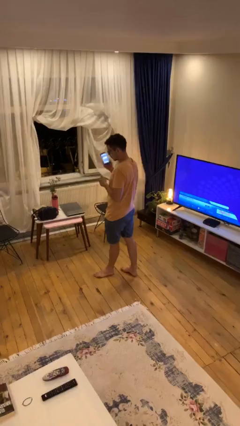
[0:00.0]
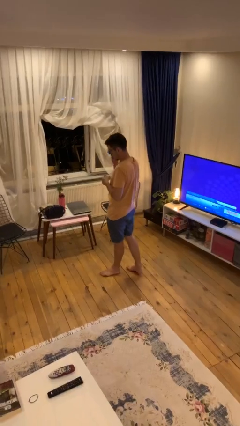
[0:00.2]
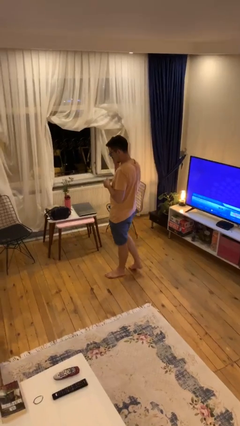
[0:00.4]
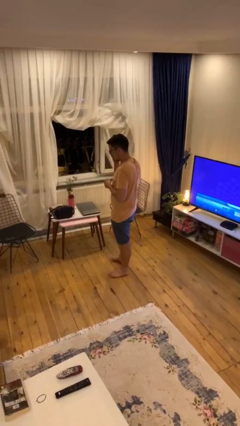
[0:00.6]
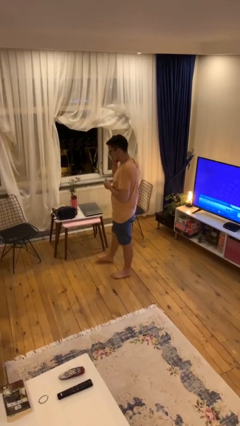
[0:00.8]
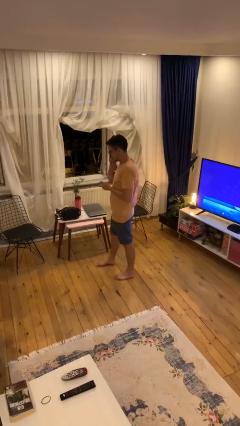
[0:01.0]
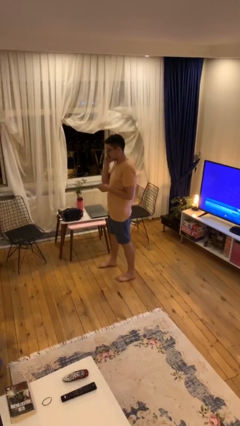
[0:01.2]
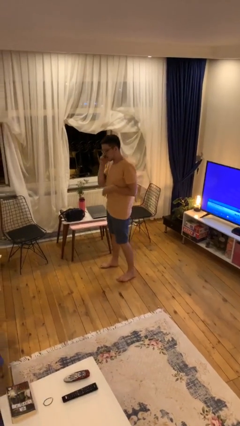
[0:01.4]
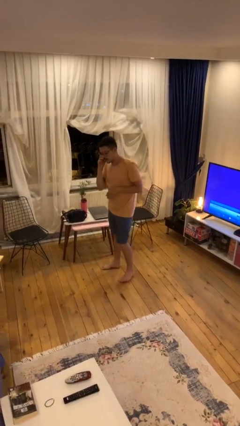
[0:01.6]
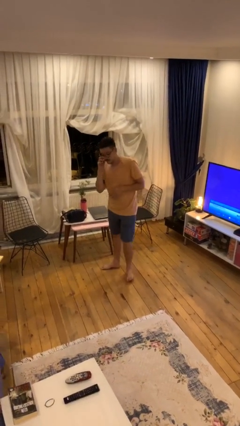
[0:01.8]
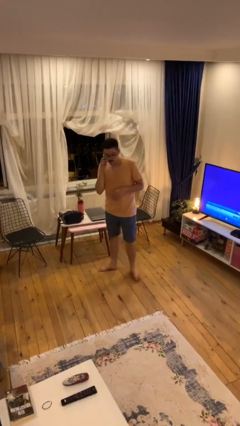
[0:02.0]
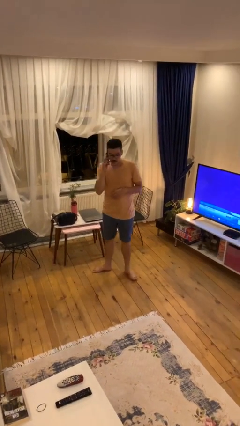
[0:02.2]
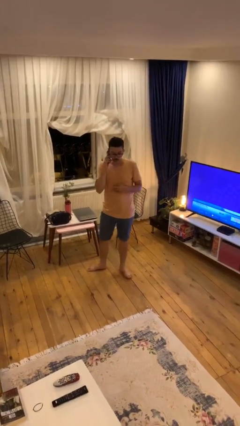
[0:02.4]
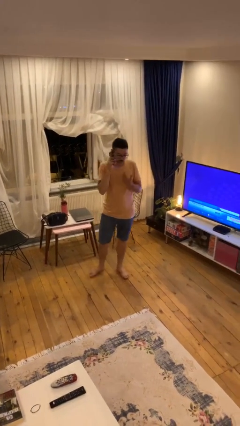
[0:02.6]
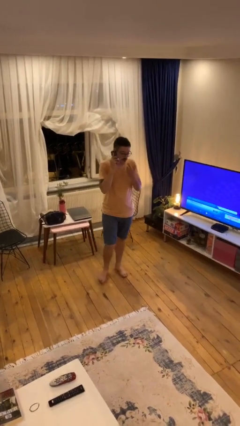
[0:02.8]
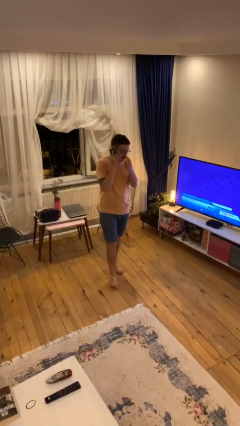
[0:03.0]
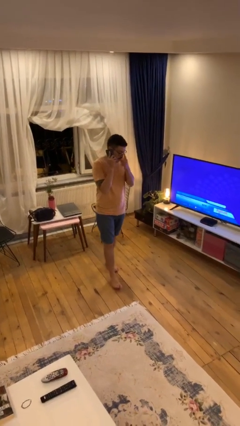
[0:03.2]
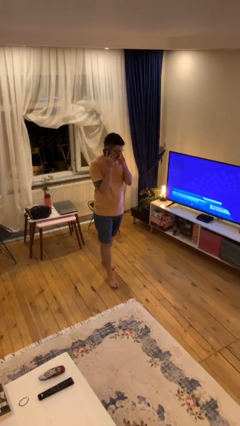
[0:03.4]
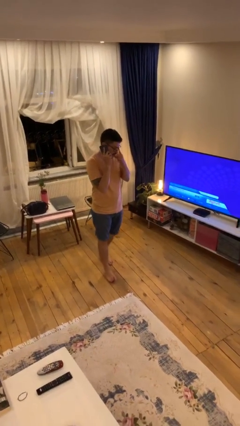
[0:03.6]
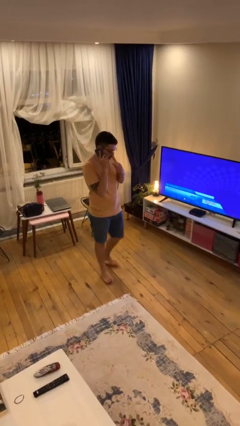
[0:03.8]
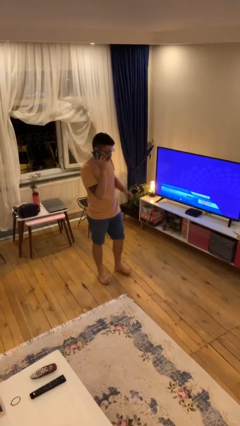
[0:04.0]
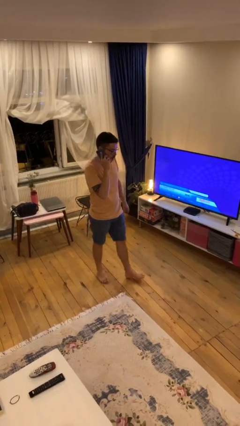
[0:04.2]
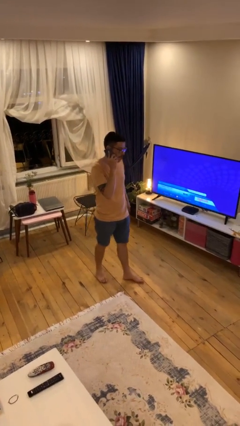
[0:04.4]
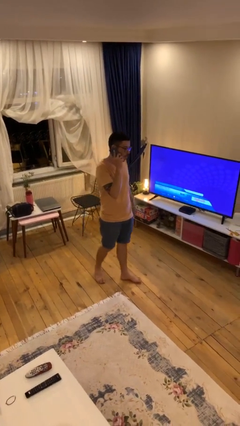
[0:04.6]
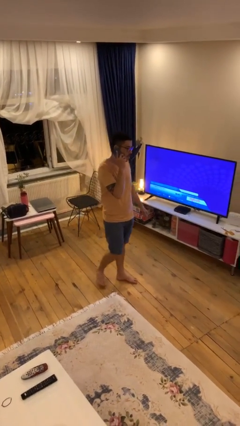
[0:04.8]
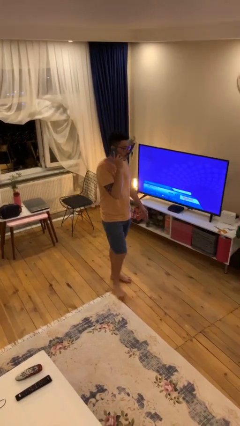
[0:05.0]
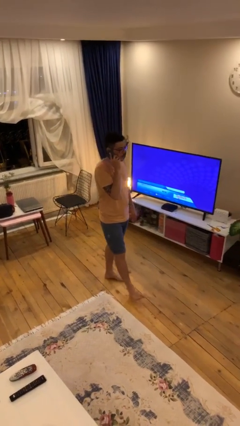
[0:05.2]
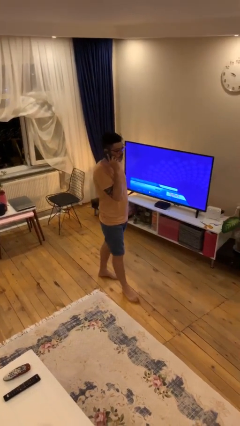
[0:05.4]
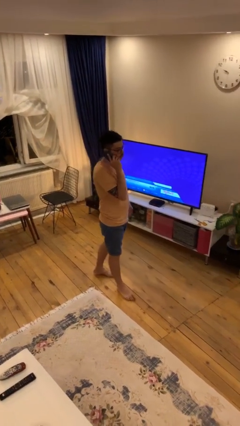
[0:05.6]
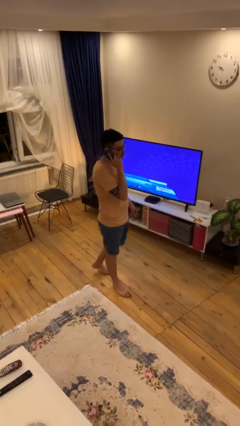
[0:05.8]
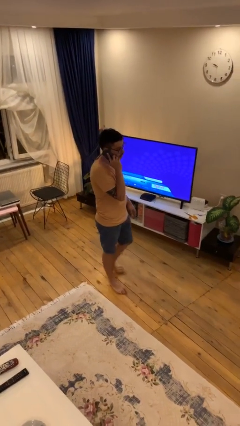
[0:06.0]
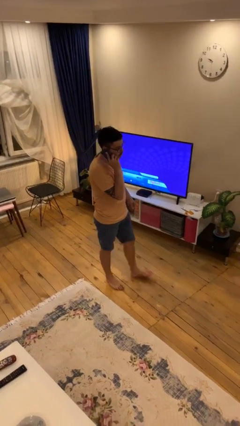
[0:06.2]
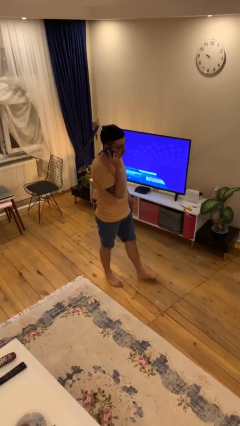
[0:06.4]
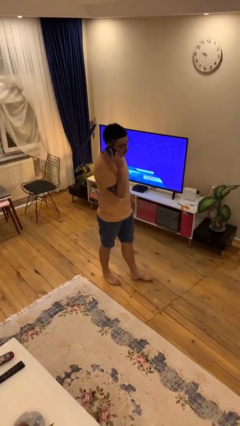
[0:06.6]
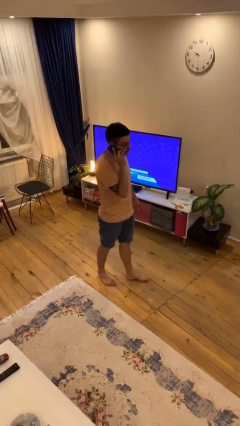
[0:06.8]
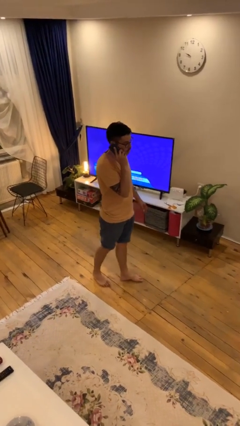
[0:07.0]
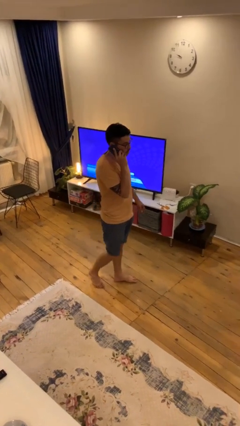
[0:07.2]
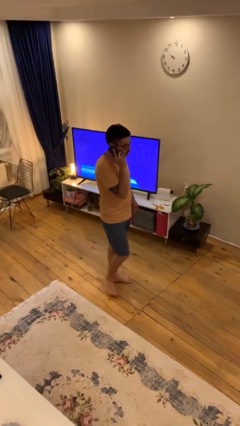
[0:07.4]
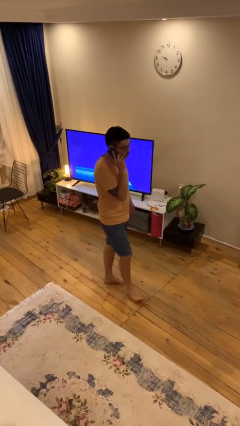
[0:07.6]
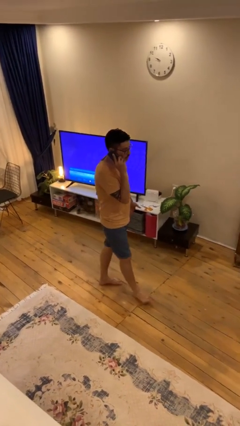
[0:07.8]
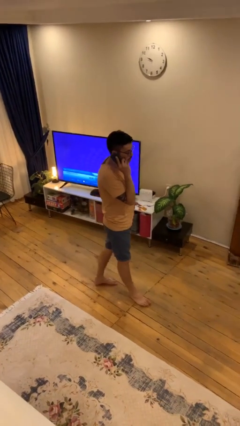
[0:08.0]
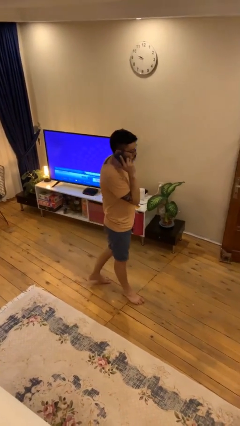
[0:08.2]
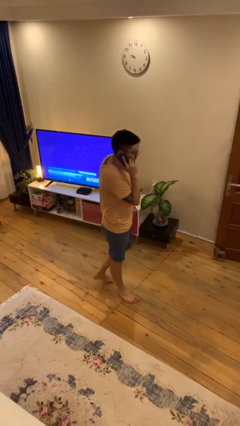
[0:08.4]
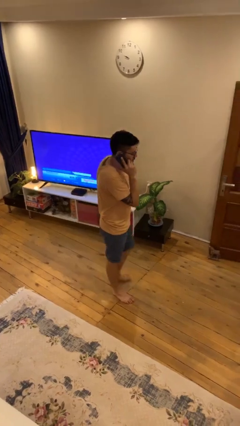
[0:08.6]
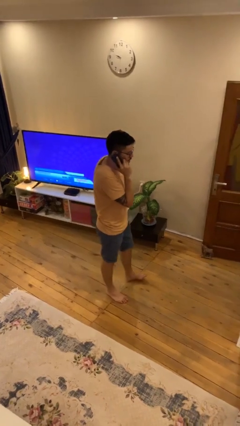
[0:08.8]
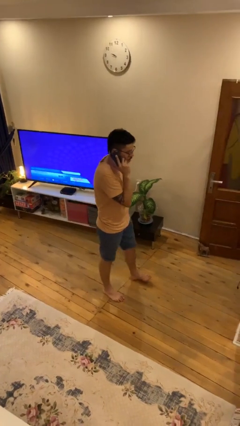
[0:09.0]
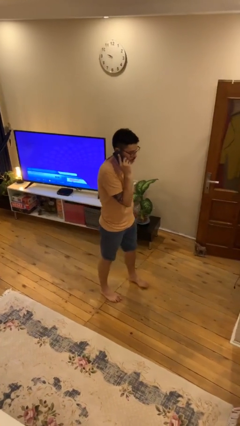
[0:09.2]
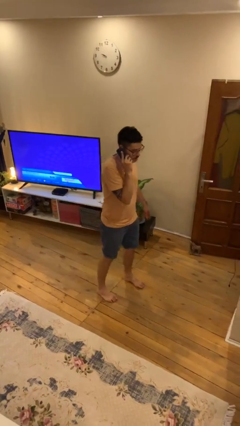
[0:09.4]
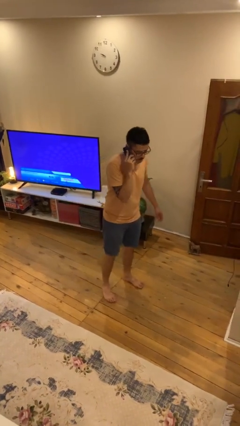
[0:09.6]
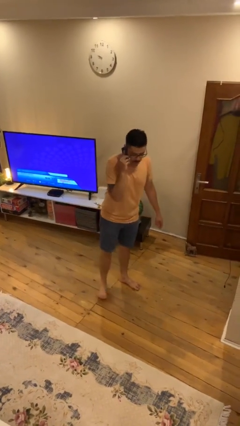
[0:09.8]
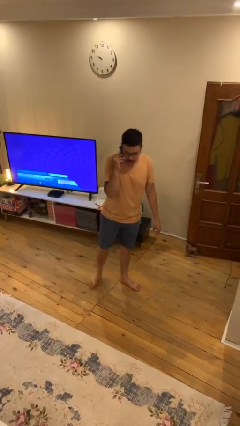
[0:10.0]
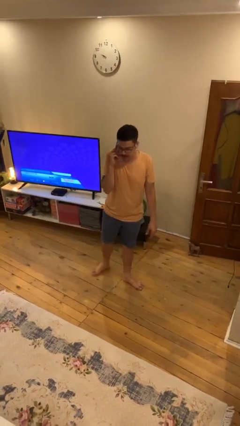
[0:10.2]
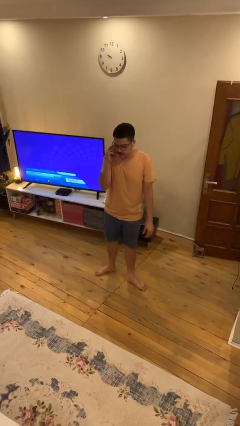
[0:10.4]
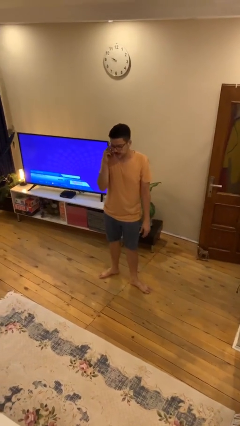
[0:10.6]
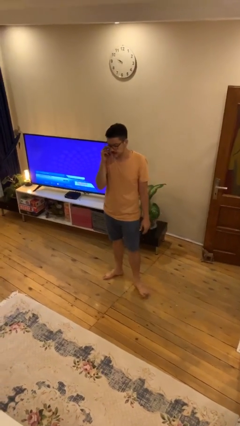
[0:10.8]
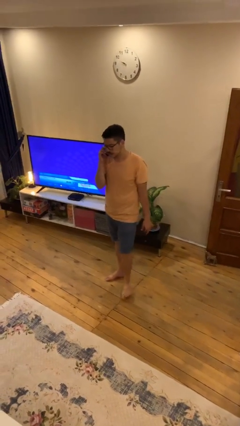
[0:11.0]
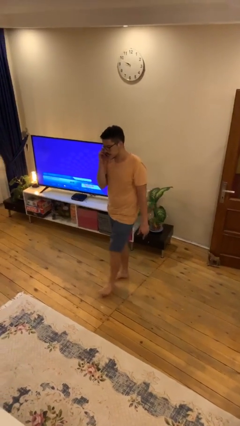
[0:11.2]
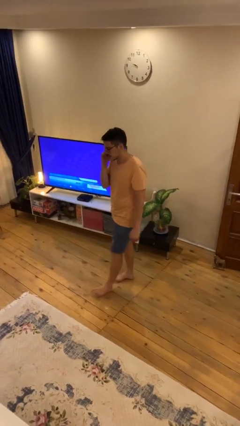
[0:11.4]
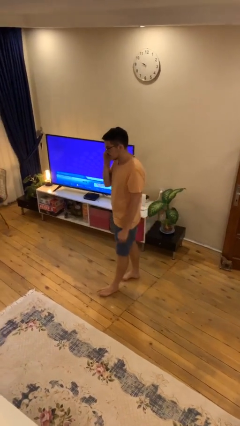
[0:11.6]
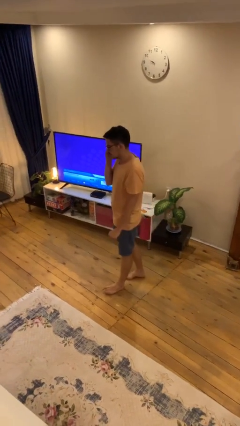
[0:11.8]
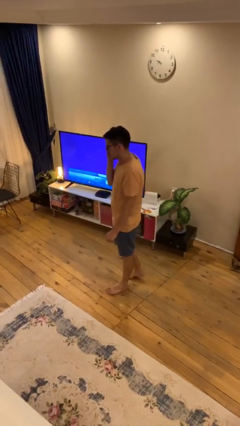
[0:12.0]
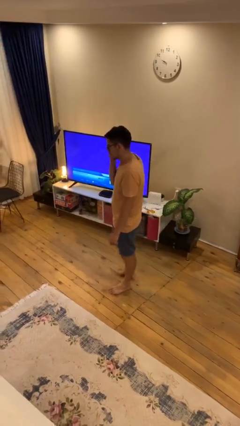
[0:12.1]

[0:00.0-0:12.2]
person talks on phone

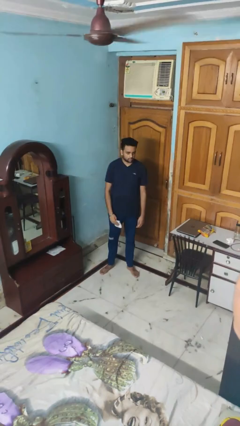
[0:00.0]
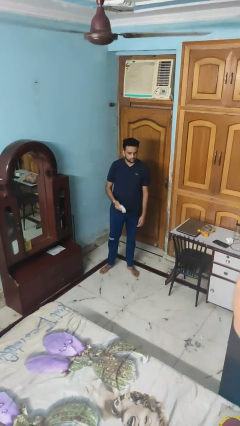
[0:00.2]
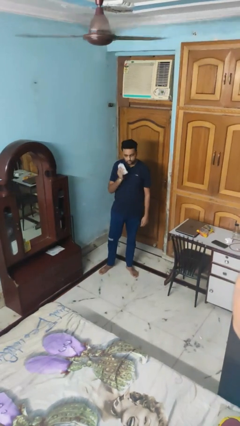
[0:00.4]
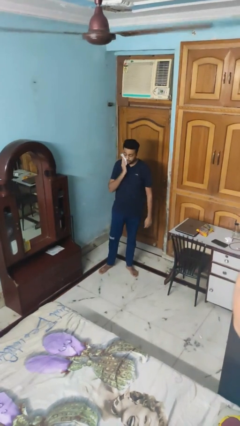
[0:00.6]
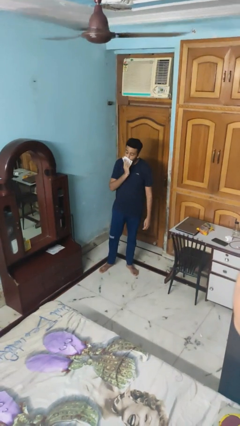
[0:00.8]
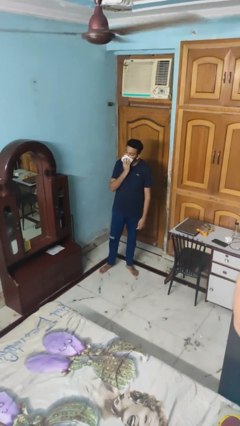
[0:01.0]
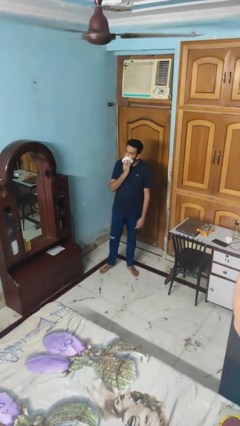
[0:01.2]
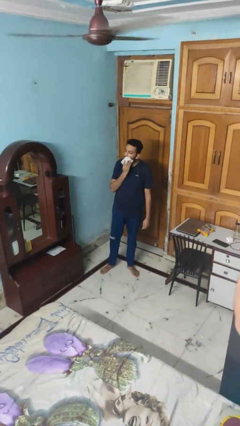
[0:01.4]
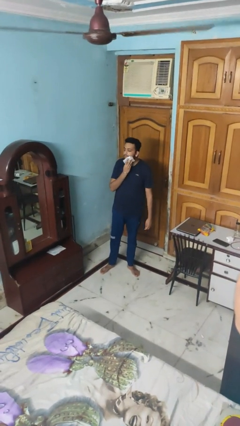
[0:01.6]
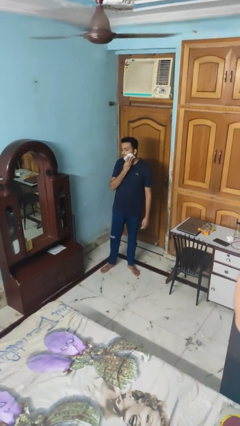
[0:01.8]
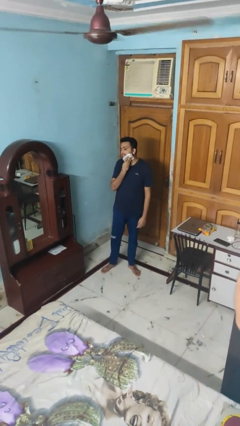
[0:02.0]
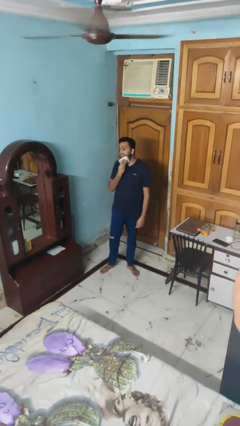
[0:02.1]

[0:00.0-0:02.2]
person wipes mouth with napkin

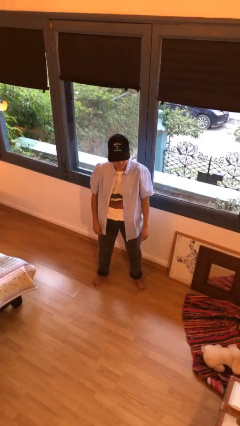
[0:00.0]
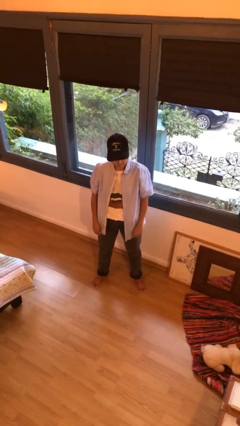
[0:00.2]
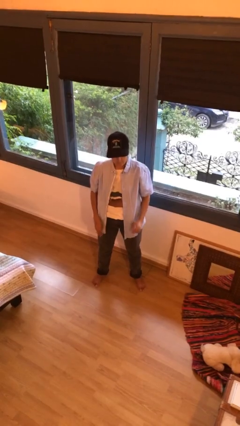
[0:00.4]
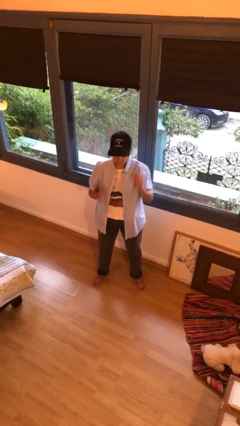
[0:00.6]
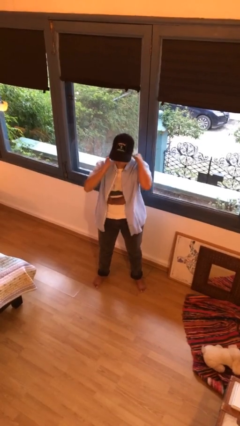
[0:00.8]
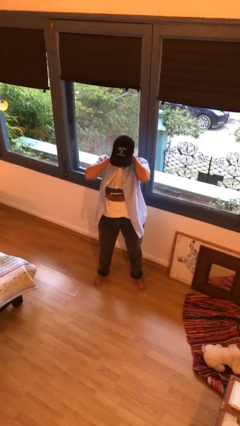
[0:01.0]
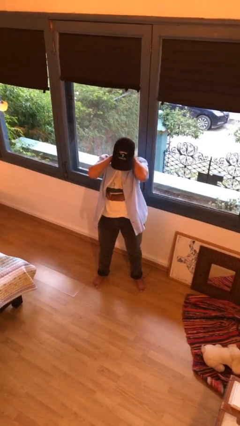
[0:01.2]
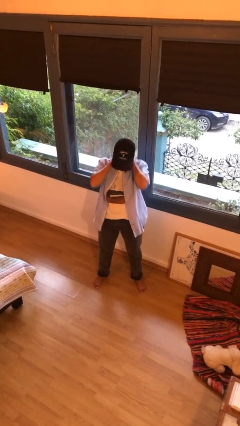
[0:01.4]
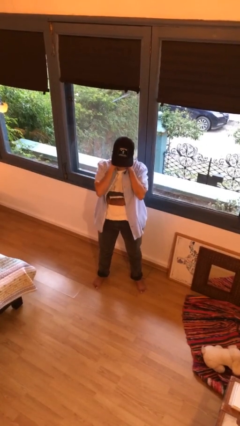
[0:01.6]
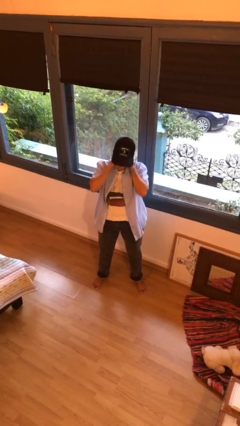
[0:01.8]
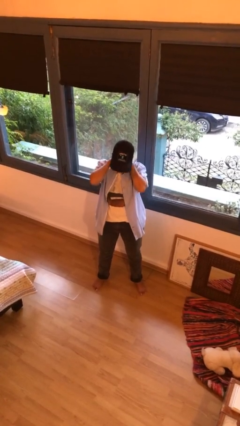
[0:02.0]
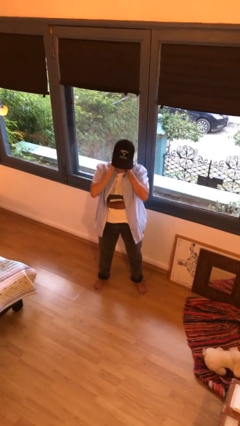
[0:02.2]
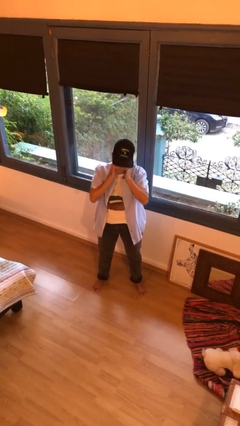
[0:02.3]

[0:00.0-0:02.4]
person rubs neck

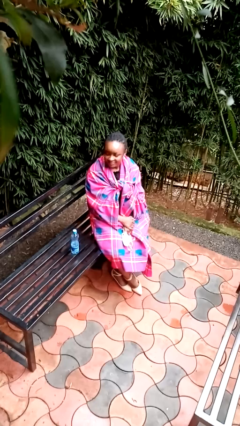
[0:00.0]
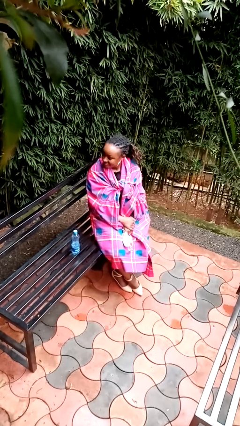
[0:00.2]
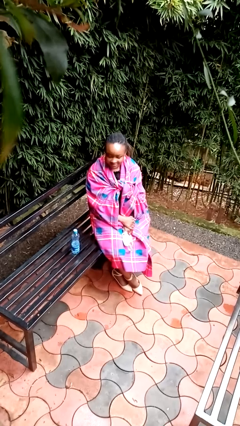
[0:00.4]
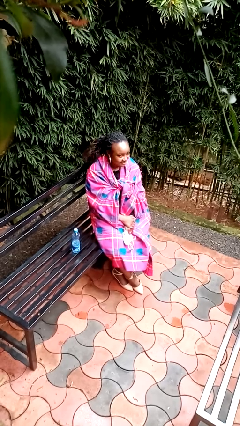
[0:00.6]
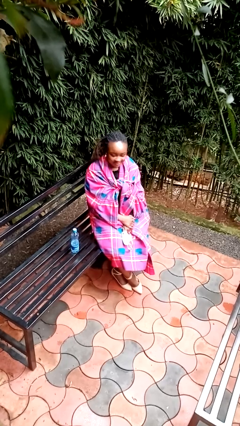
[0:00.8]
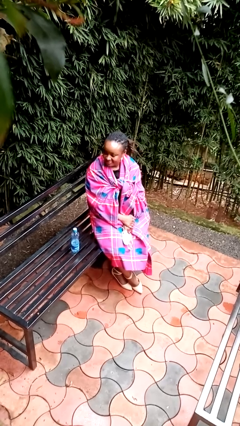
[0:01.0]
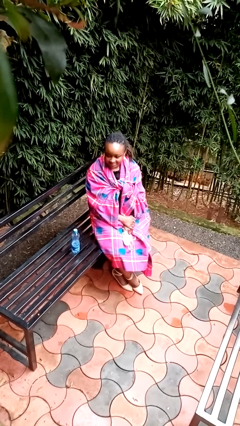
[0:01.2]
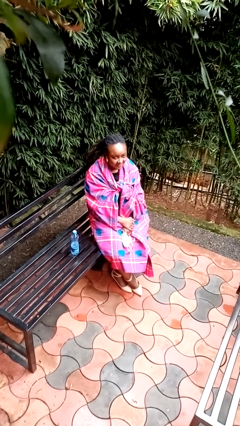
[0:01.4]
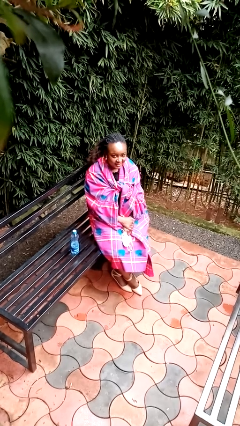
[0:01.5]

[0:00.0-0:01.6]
person shakes head
